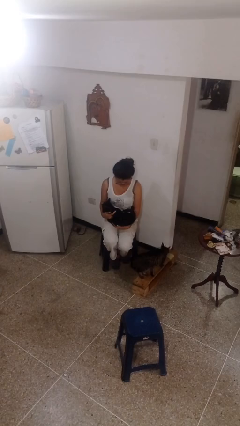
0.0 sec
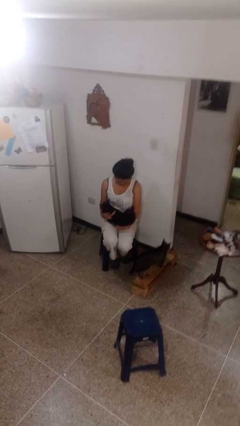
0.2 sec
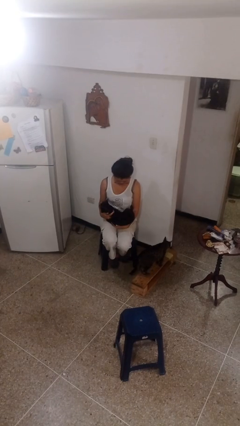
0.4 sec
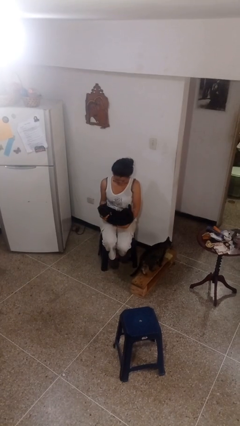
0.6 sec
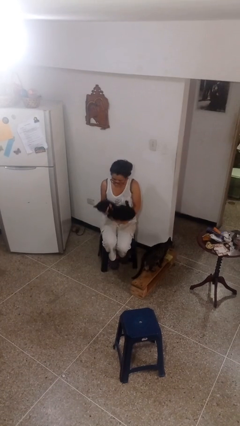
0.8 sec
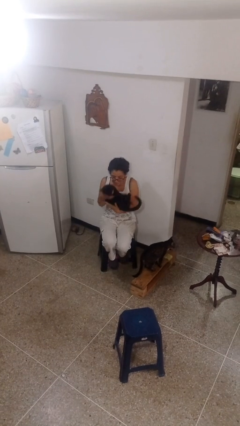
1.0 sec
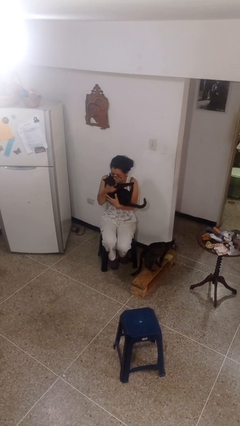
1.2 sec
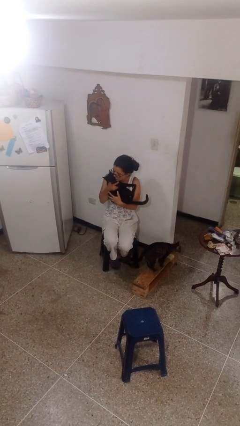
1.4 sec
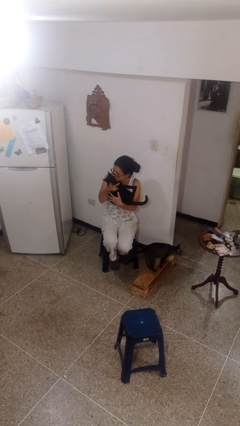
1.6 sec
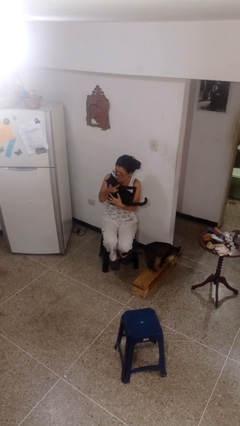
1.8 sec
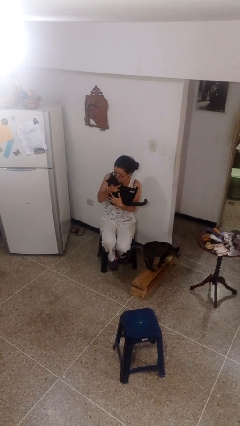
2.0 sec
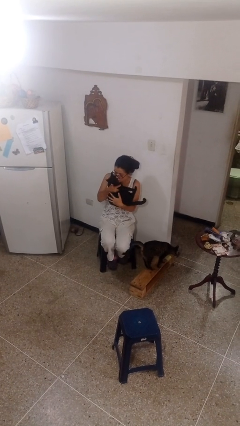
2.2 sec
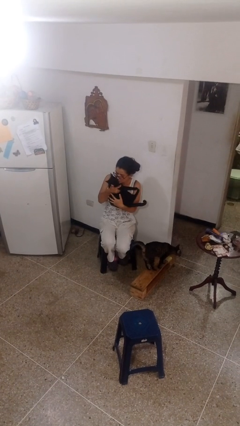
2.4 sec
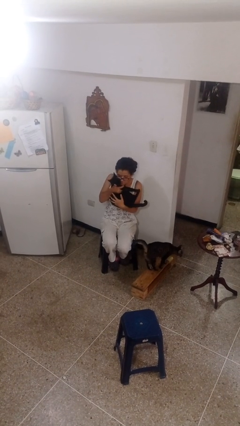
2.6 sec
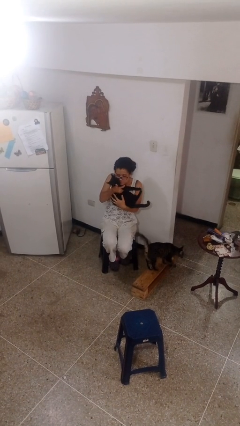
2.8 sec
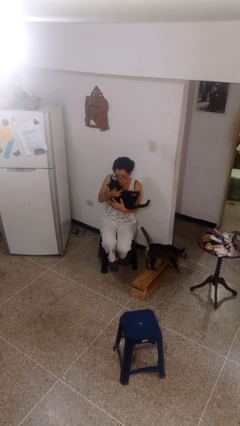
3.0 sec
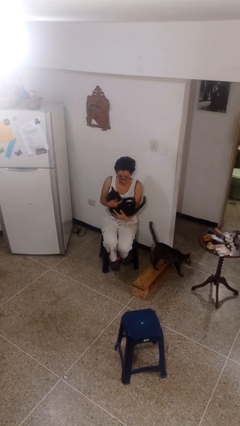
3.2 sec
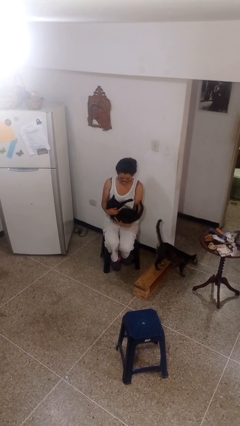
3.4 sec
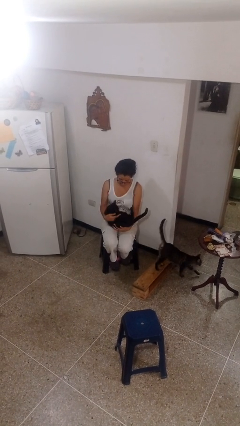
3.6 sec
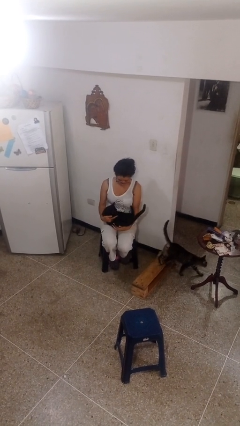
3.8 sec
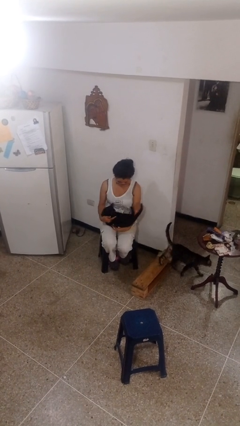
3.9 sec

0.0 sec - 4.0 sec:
person hugs cat

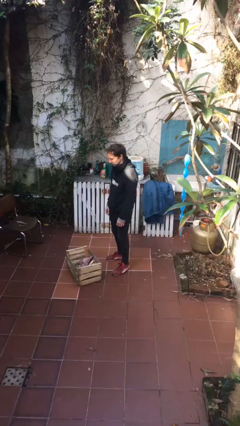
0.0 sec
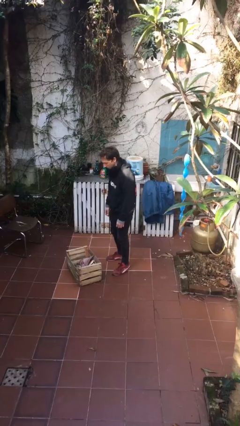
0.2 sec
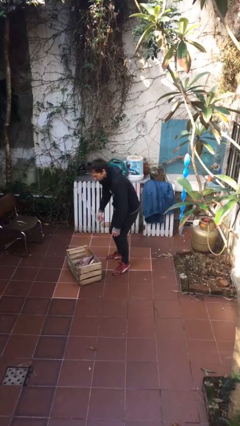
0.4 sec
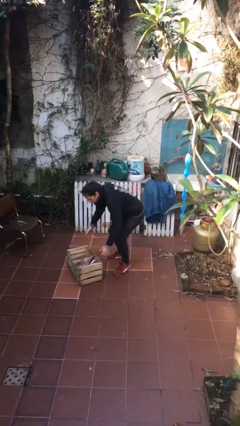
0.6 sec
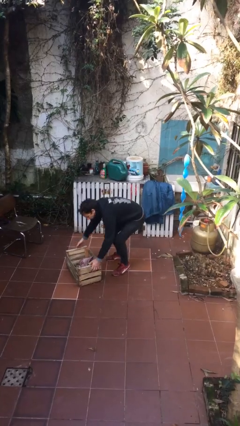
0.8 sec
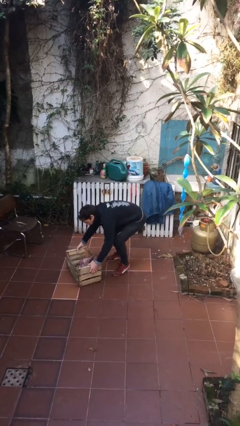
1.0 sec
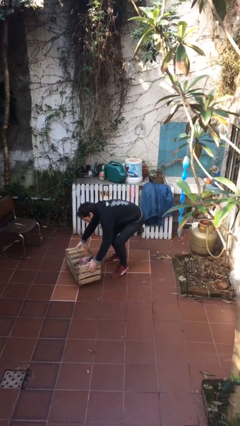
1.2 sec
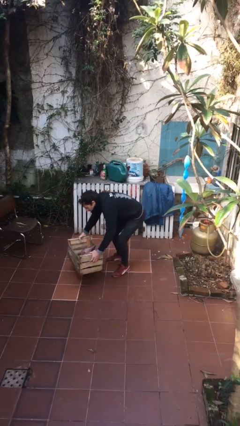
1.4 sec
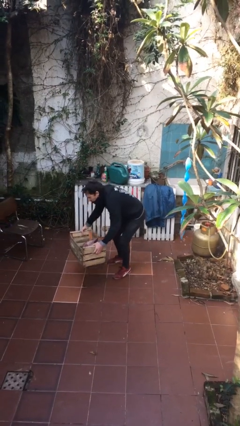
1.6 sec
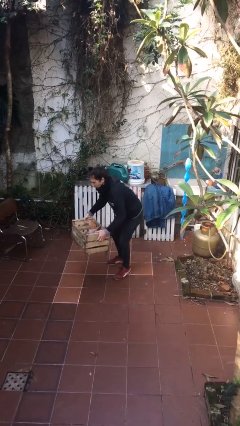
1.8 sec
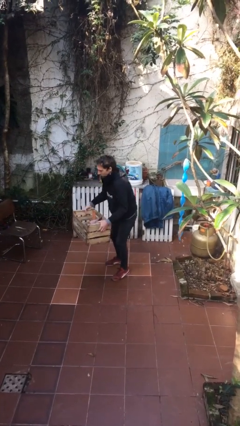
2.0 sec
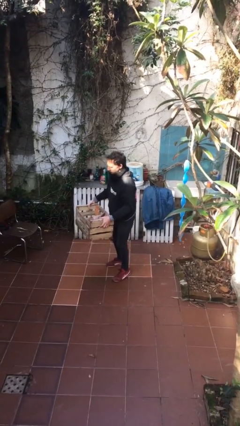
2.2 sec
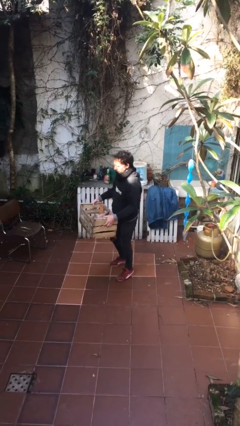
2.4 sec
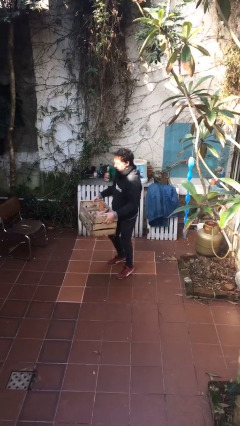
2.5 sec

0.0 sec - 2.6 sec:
person picks up object from floor

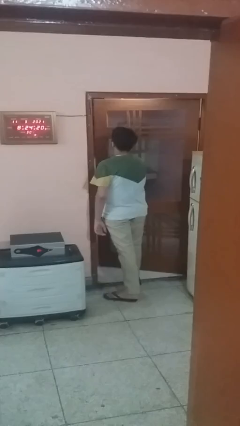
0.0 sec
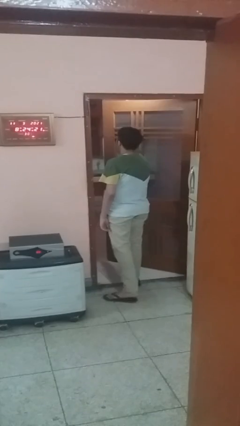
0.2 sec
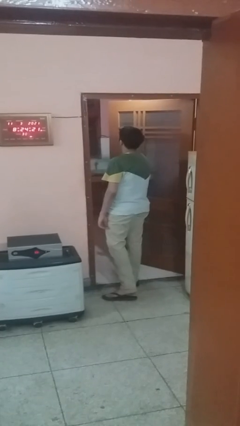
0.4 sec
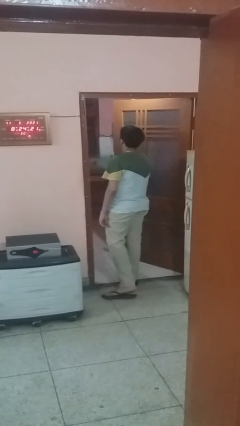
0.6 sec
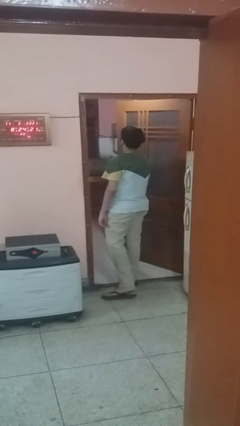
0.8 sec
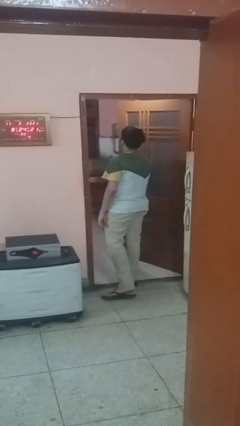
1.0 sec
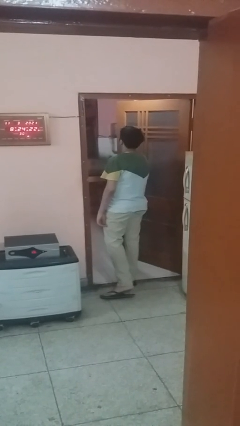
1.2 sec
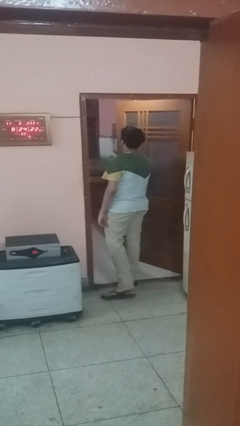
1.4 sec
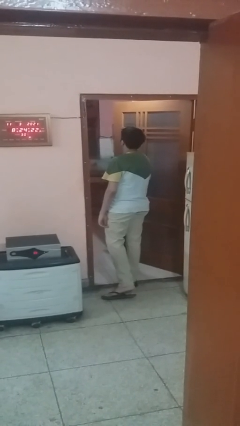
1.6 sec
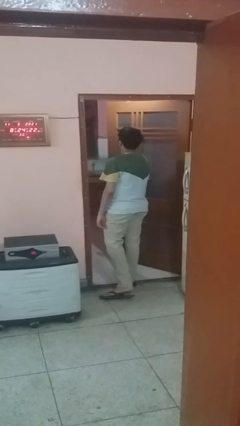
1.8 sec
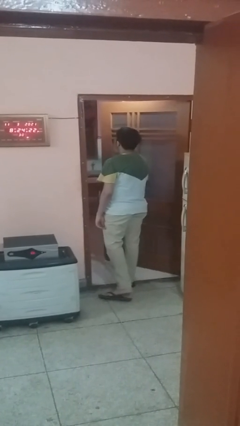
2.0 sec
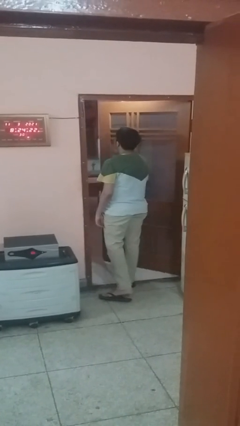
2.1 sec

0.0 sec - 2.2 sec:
person opens facility door

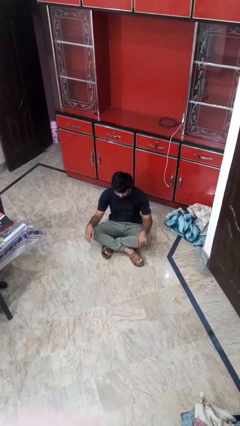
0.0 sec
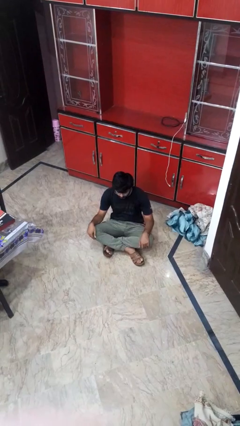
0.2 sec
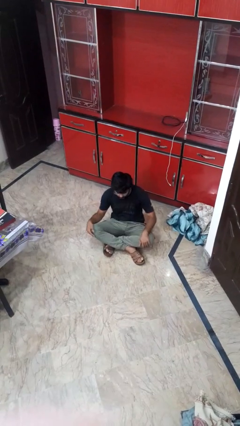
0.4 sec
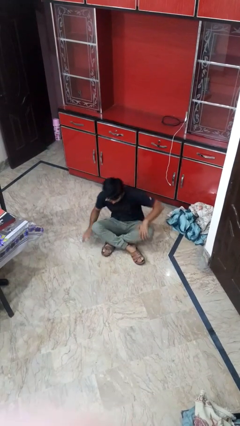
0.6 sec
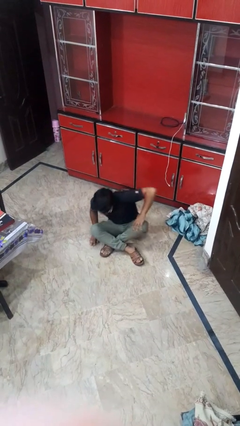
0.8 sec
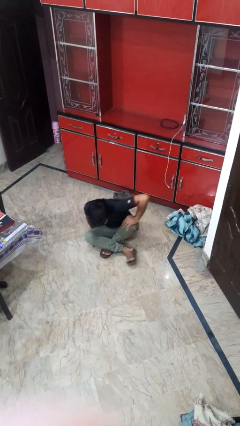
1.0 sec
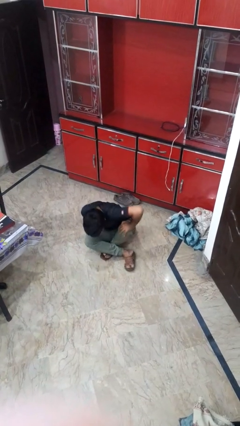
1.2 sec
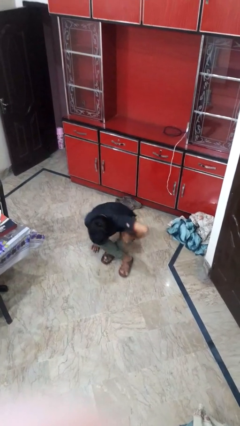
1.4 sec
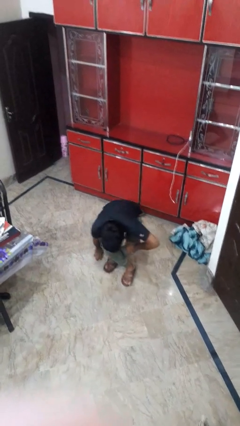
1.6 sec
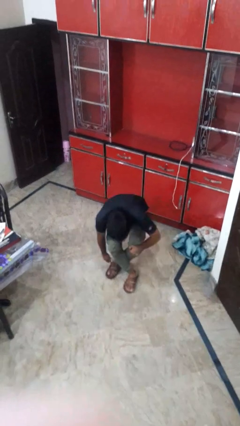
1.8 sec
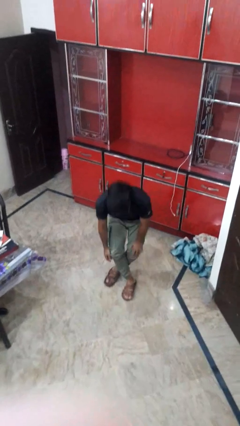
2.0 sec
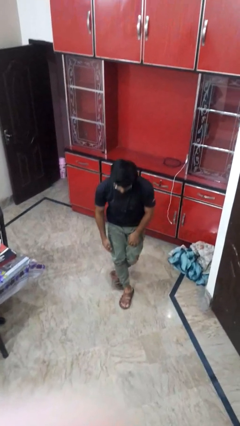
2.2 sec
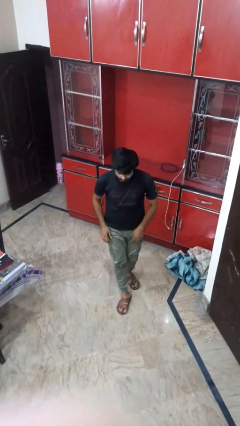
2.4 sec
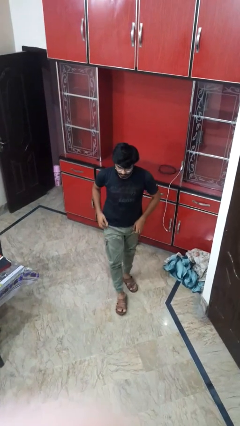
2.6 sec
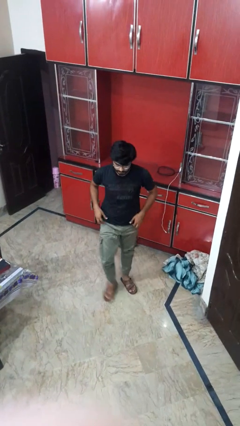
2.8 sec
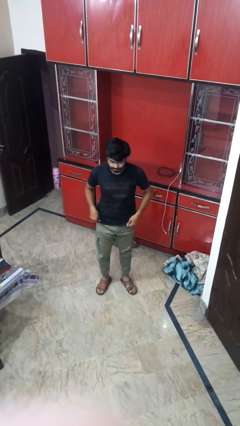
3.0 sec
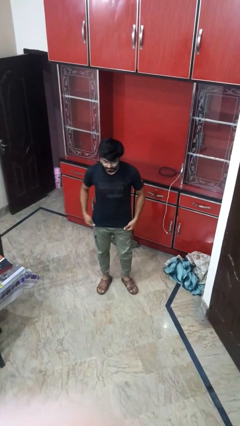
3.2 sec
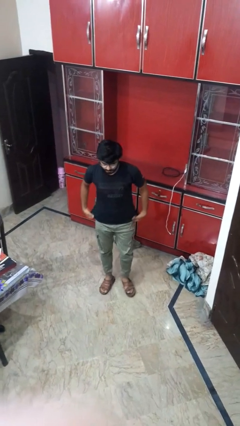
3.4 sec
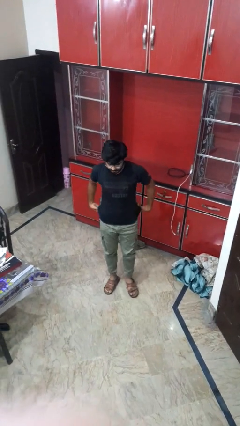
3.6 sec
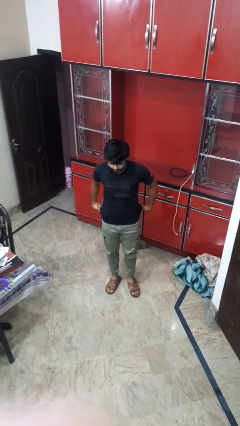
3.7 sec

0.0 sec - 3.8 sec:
person stands up from floor

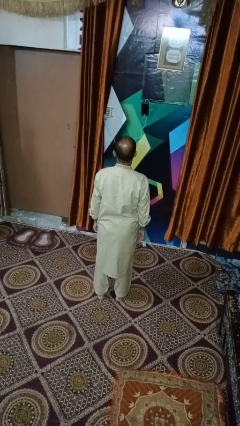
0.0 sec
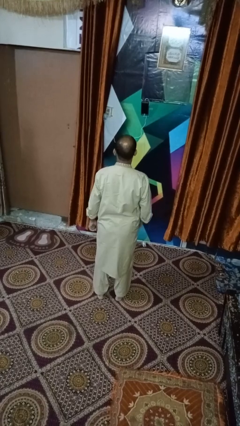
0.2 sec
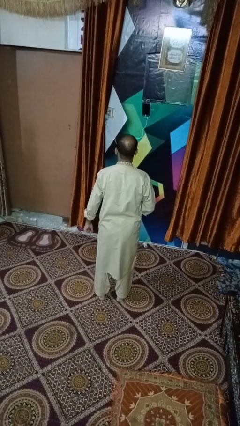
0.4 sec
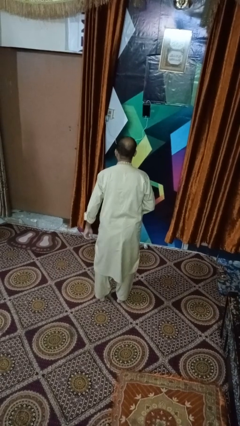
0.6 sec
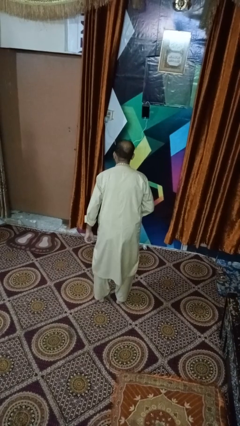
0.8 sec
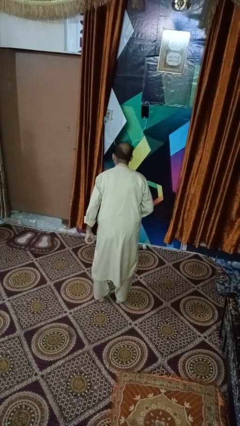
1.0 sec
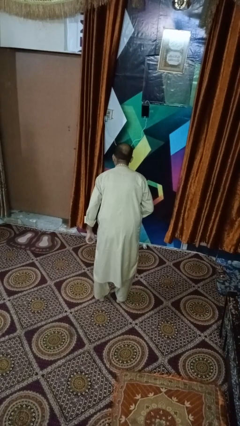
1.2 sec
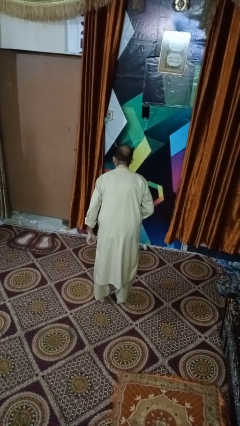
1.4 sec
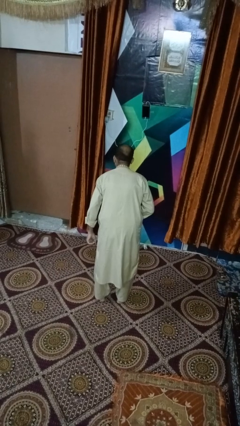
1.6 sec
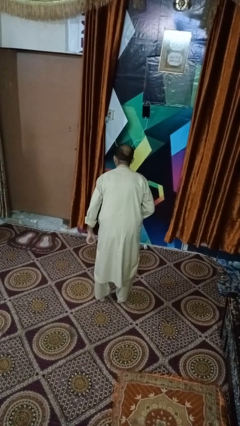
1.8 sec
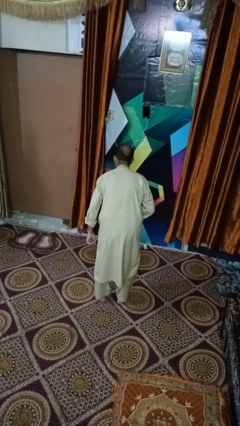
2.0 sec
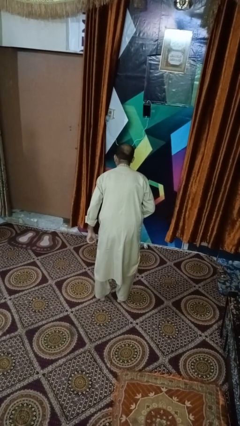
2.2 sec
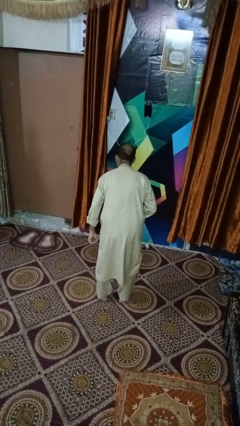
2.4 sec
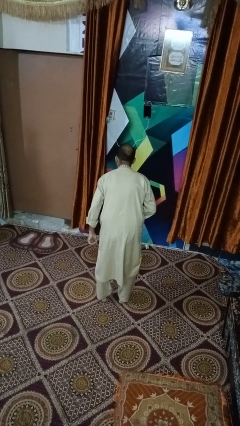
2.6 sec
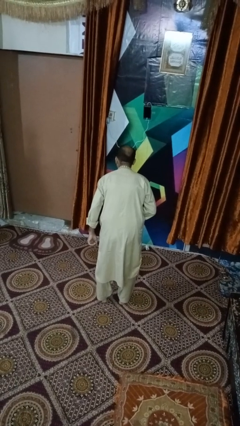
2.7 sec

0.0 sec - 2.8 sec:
person bows

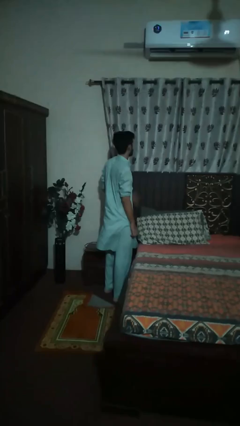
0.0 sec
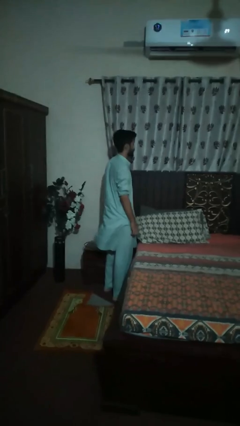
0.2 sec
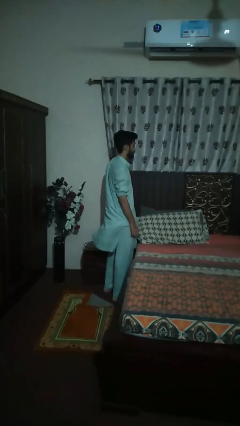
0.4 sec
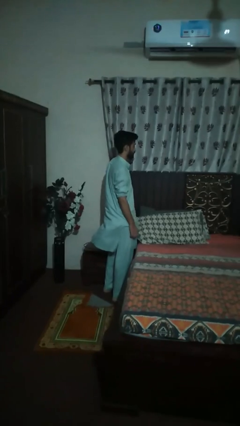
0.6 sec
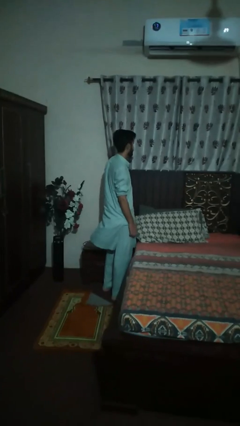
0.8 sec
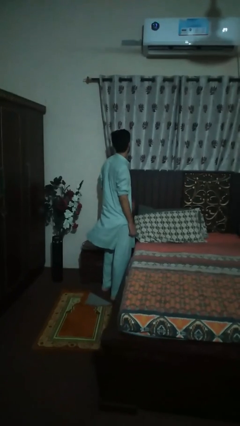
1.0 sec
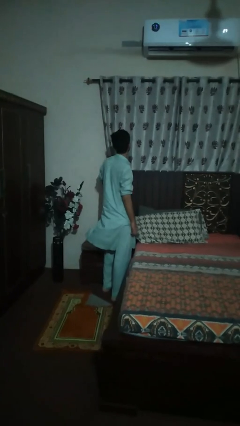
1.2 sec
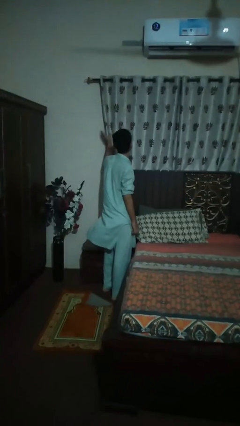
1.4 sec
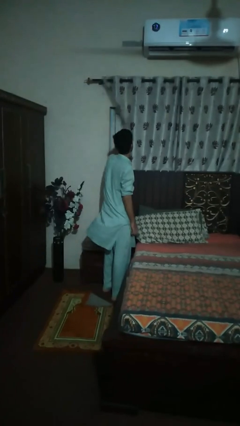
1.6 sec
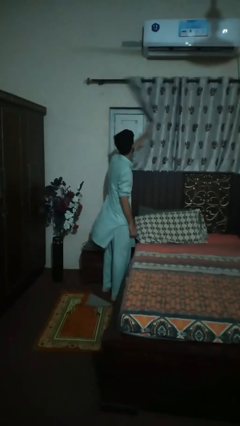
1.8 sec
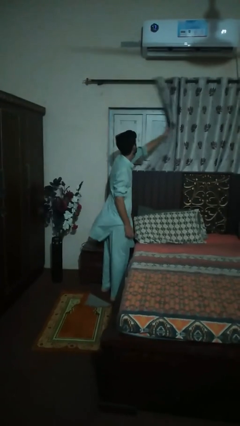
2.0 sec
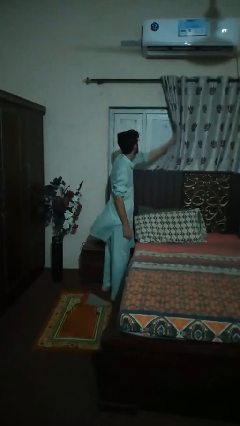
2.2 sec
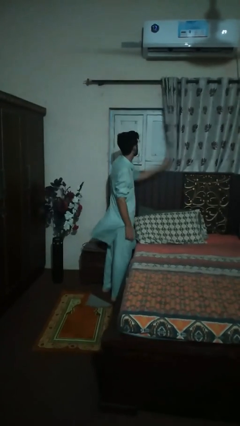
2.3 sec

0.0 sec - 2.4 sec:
person opens curtains
